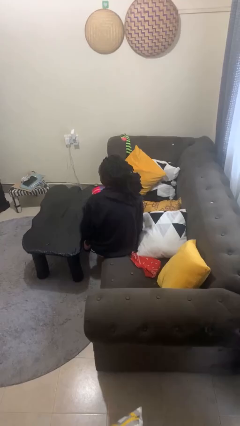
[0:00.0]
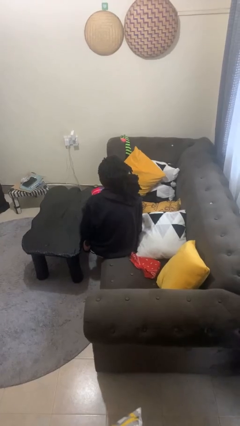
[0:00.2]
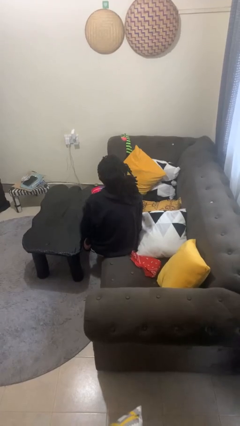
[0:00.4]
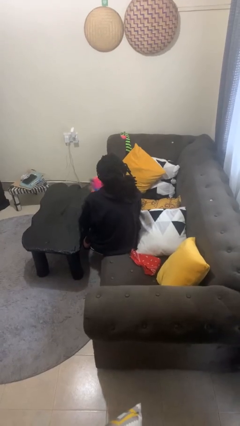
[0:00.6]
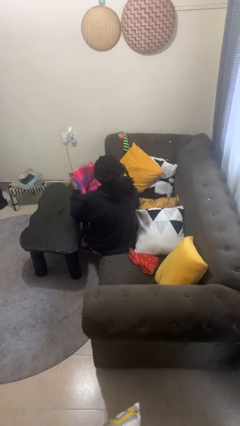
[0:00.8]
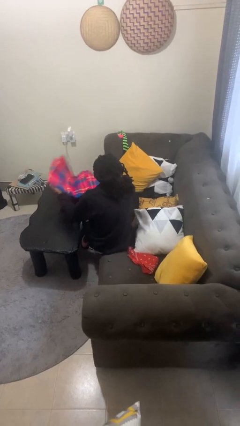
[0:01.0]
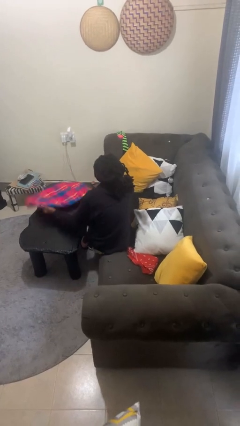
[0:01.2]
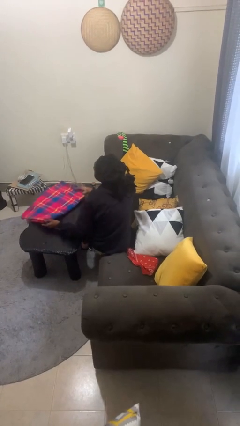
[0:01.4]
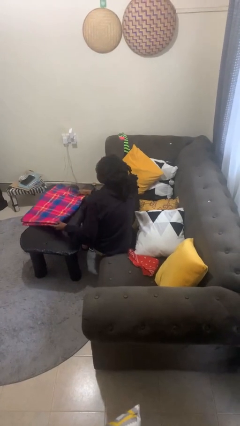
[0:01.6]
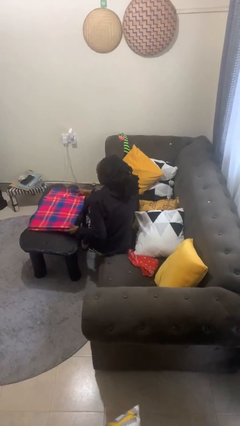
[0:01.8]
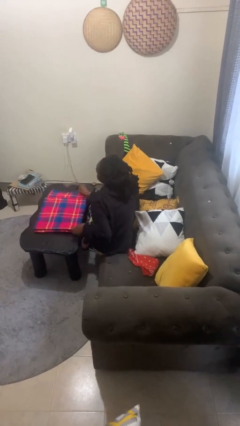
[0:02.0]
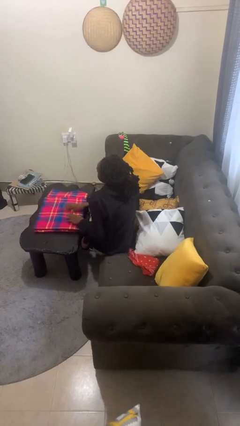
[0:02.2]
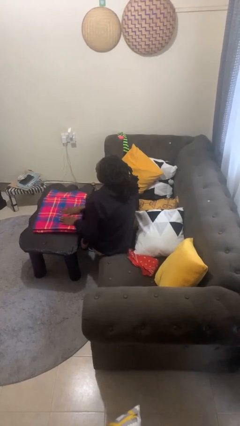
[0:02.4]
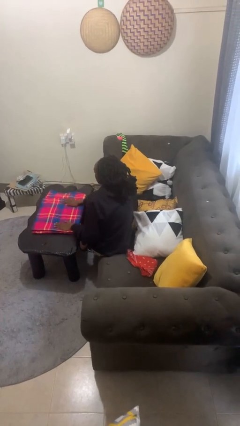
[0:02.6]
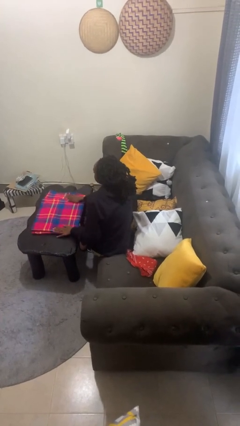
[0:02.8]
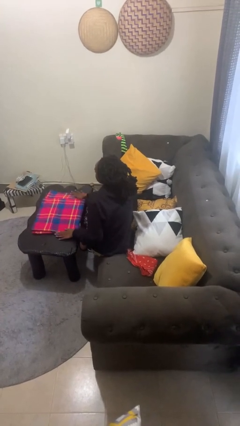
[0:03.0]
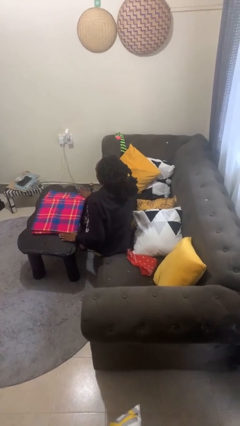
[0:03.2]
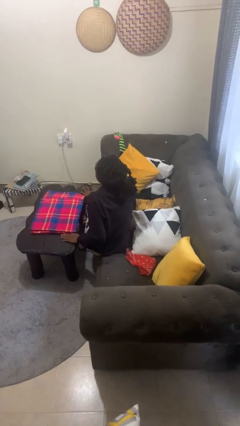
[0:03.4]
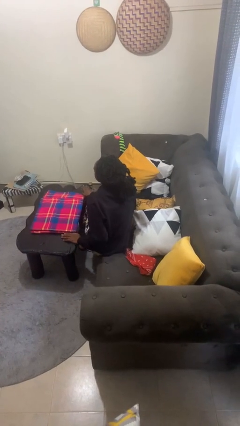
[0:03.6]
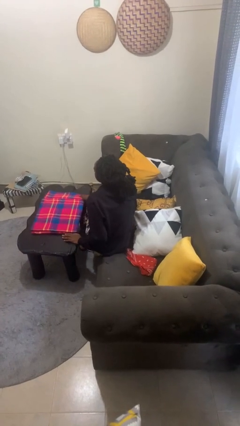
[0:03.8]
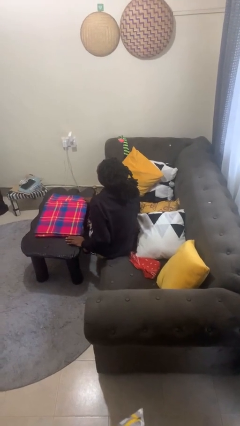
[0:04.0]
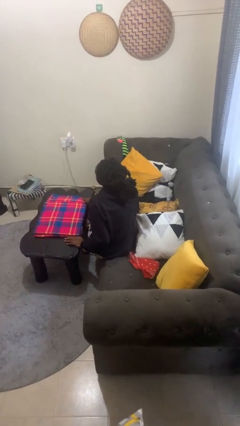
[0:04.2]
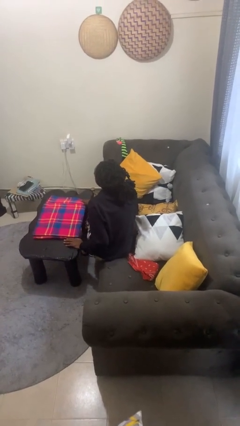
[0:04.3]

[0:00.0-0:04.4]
person spreads tablecloth

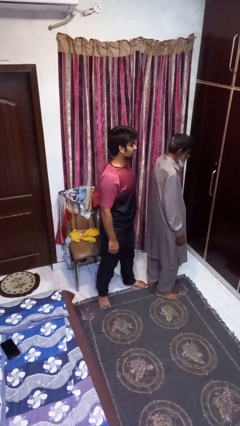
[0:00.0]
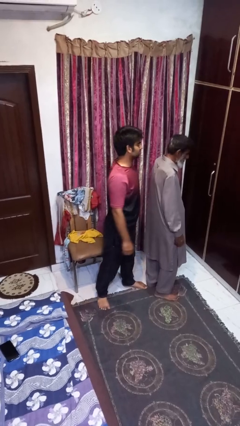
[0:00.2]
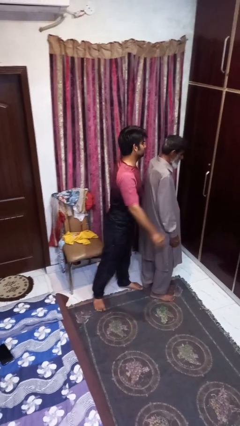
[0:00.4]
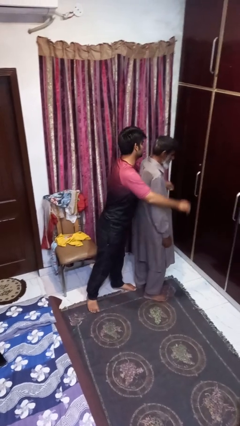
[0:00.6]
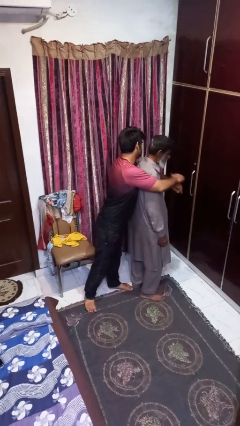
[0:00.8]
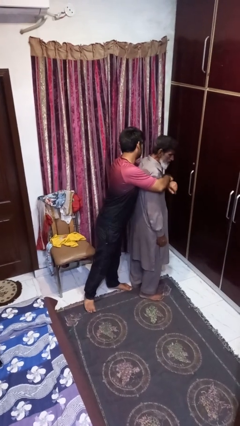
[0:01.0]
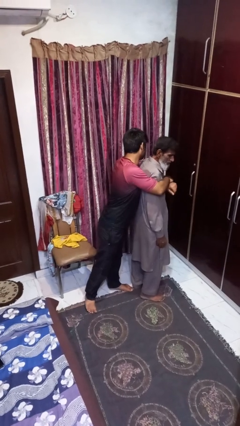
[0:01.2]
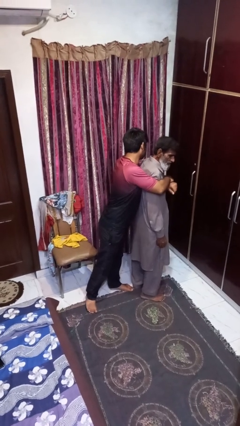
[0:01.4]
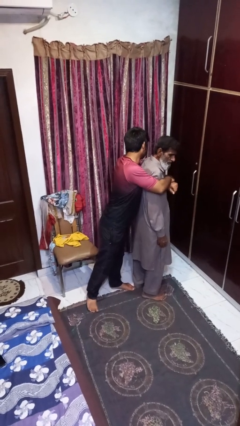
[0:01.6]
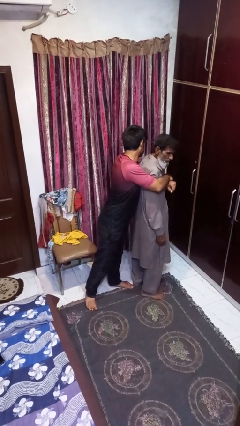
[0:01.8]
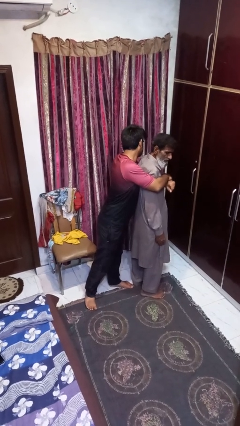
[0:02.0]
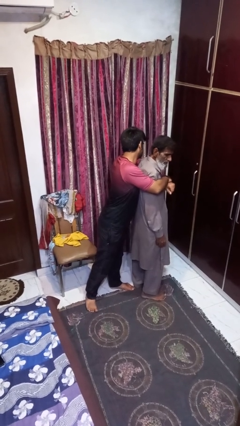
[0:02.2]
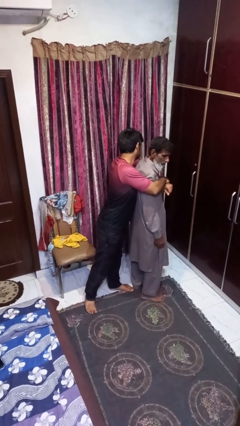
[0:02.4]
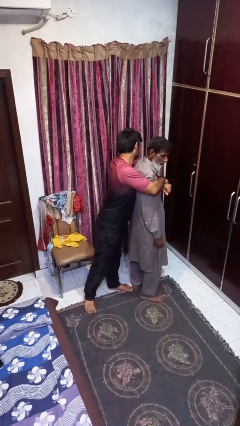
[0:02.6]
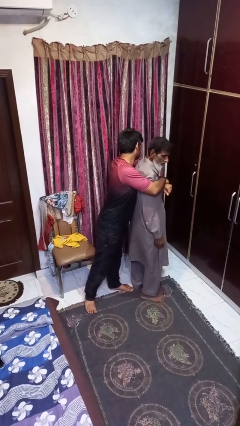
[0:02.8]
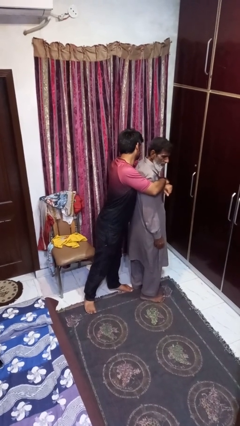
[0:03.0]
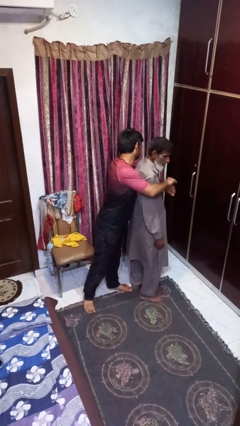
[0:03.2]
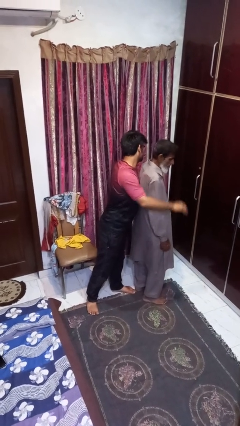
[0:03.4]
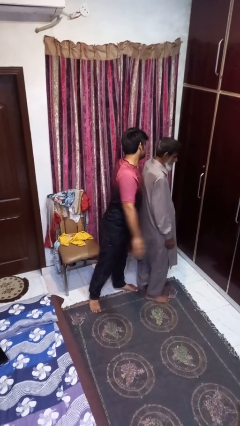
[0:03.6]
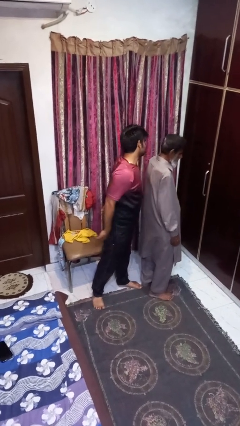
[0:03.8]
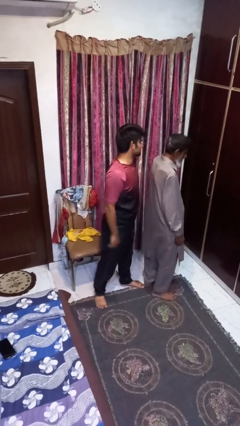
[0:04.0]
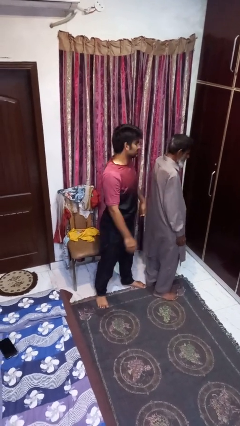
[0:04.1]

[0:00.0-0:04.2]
person hugs person from behind

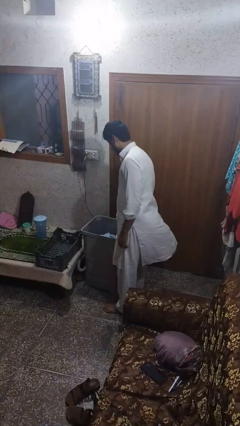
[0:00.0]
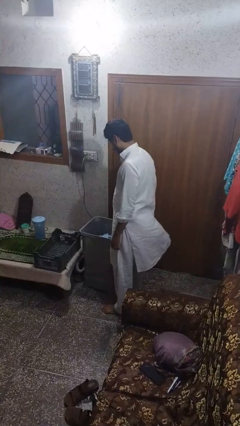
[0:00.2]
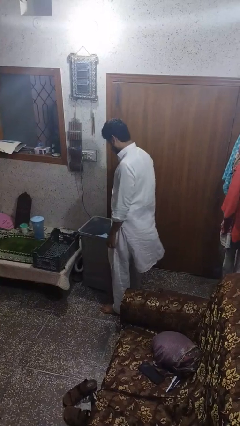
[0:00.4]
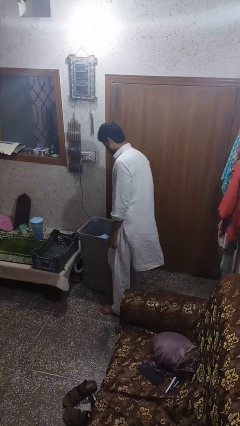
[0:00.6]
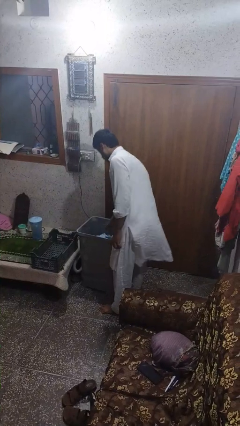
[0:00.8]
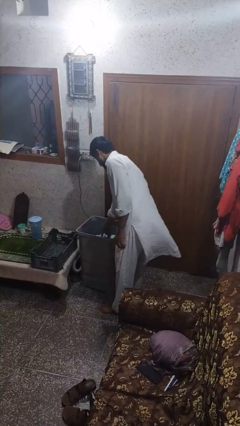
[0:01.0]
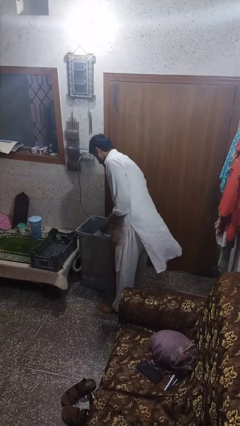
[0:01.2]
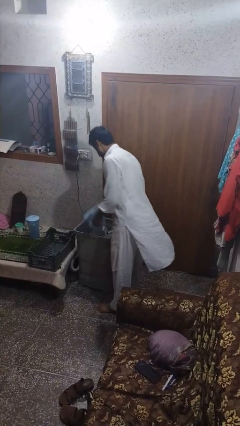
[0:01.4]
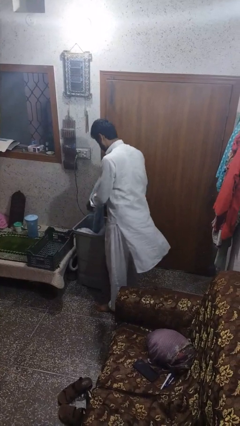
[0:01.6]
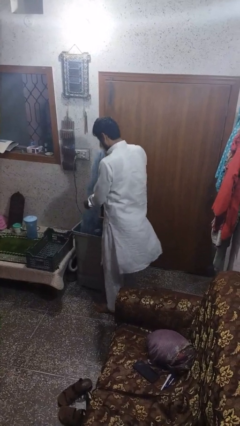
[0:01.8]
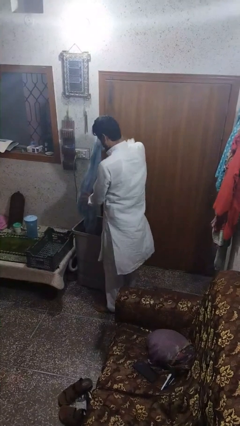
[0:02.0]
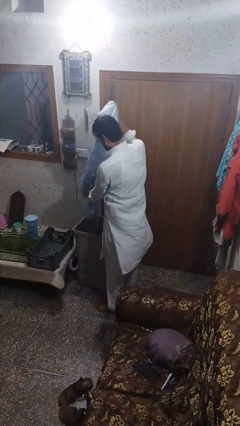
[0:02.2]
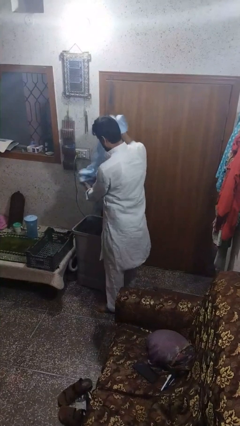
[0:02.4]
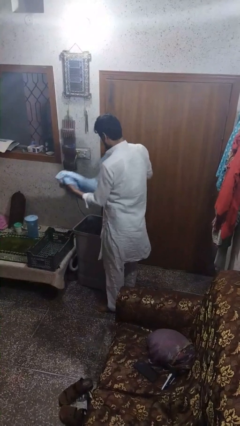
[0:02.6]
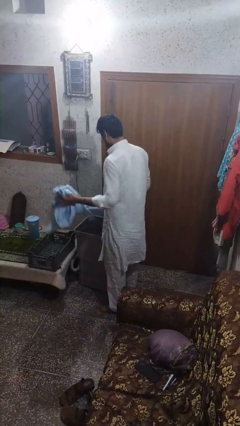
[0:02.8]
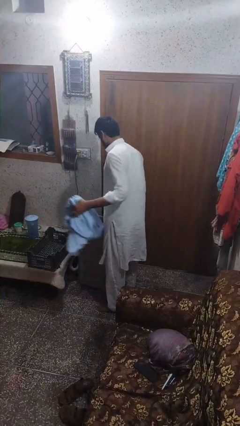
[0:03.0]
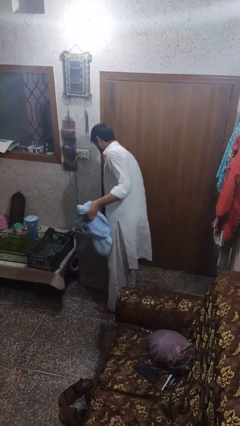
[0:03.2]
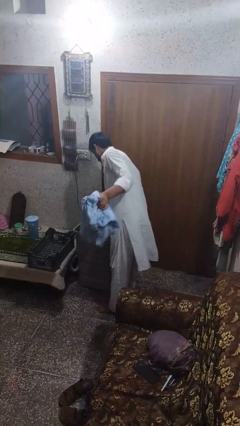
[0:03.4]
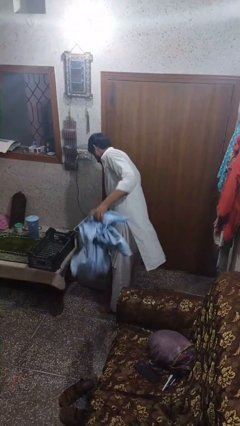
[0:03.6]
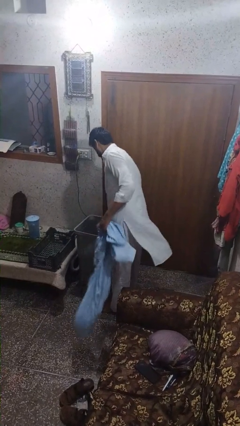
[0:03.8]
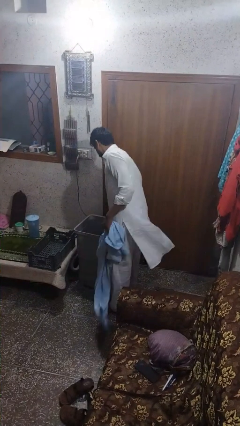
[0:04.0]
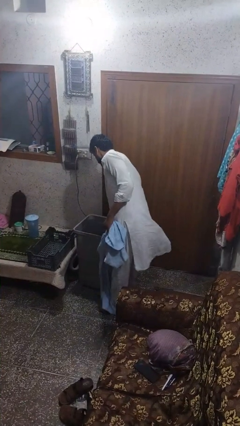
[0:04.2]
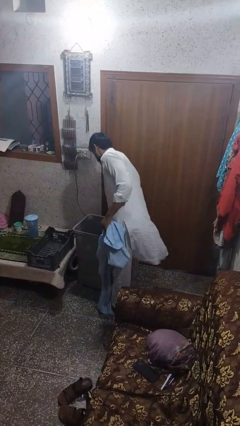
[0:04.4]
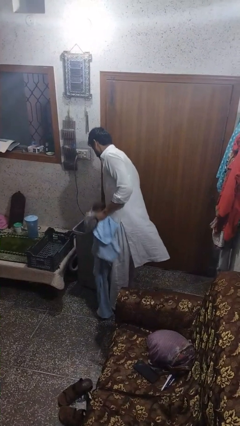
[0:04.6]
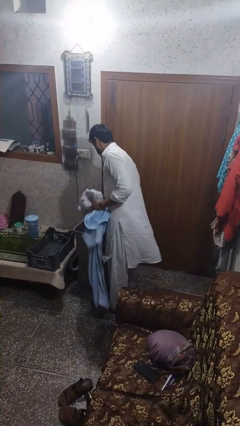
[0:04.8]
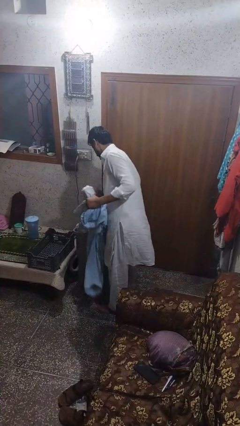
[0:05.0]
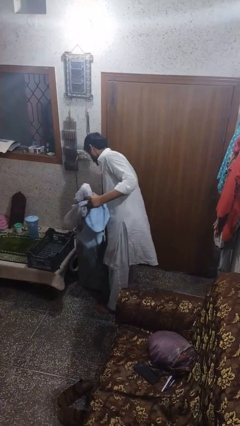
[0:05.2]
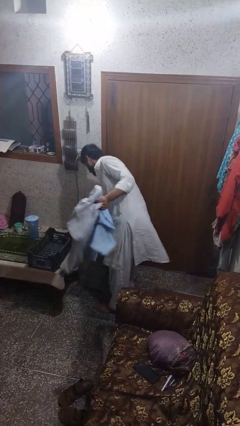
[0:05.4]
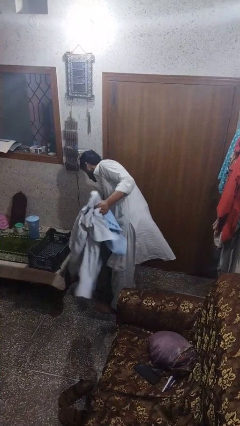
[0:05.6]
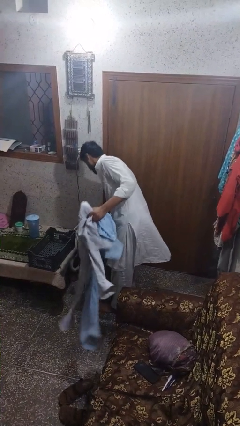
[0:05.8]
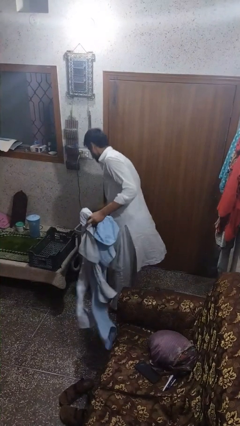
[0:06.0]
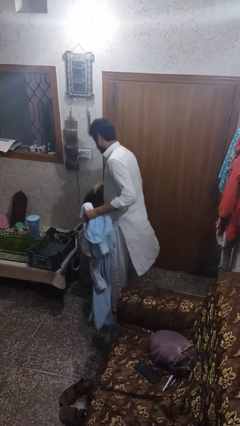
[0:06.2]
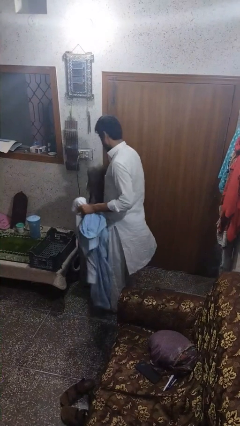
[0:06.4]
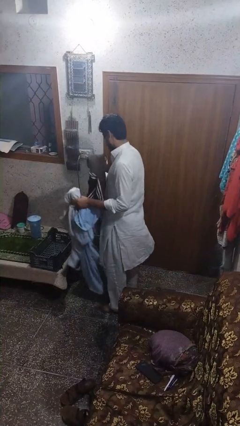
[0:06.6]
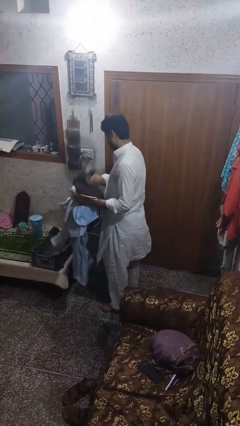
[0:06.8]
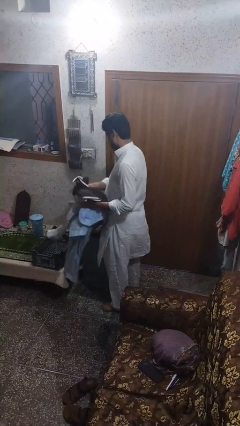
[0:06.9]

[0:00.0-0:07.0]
person unloads dryer

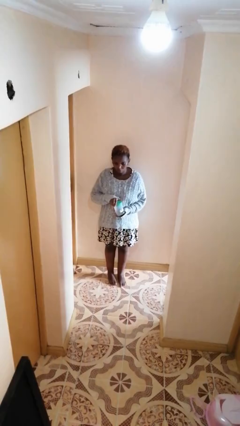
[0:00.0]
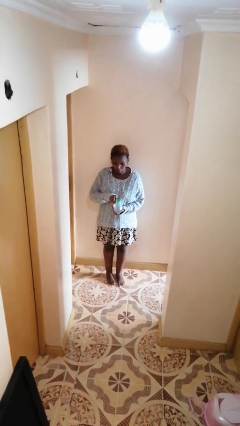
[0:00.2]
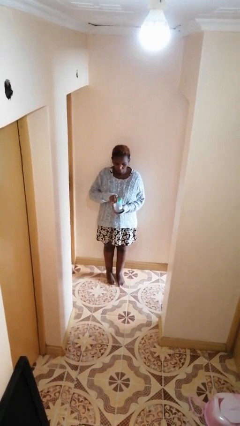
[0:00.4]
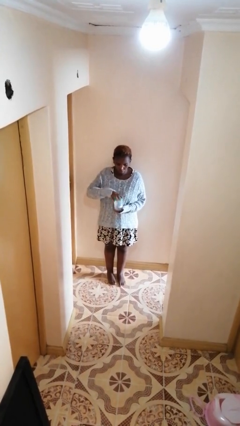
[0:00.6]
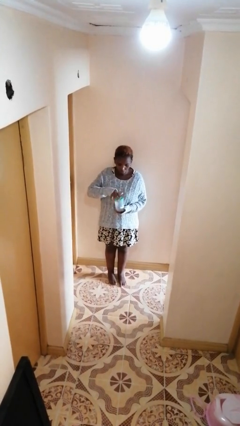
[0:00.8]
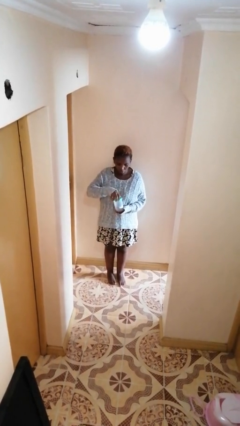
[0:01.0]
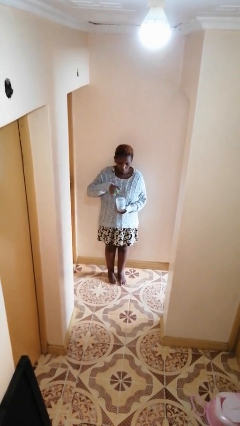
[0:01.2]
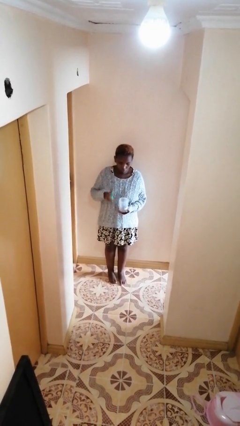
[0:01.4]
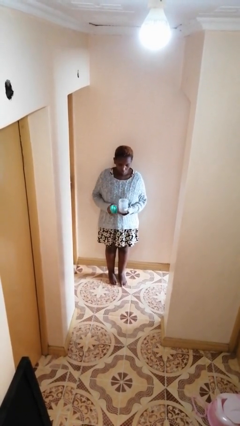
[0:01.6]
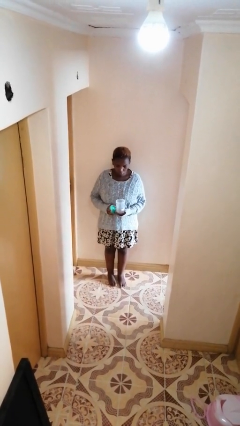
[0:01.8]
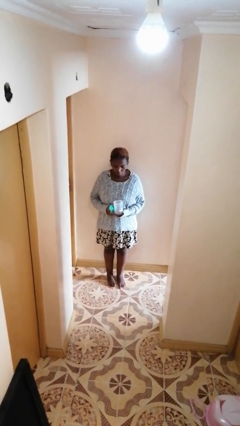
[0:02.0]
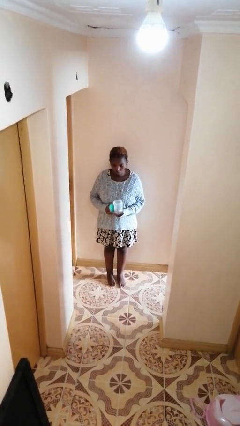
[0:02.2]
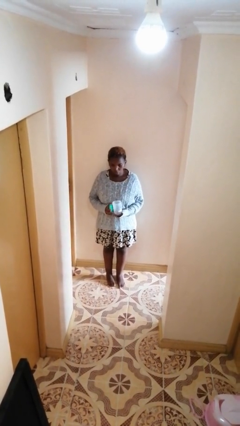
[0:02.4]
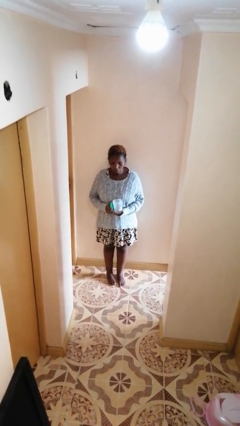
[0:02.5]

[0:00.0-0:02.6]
person opens jar
